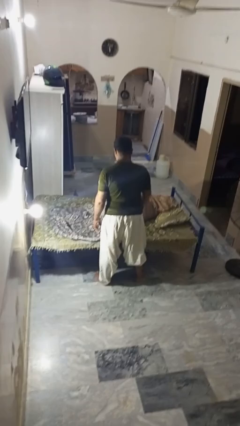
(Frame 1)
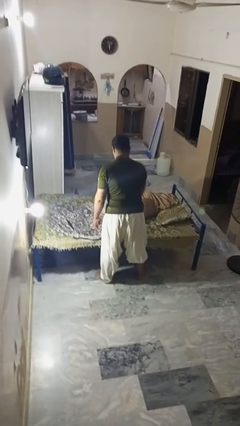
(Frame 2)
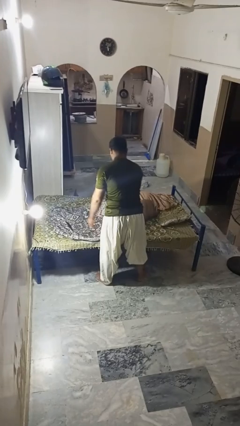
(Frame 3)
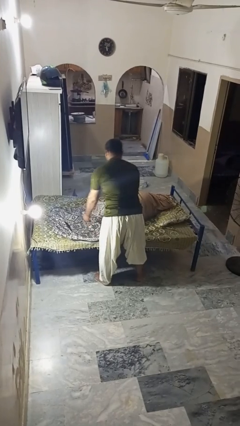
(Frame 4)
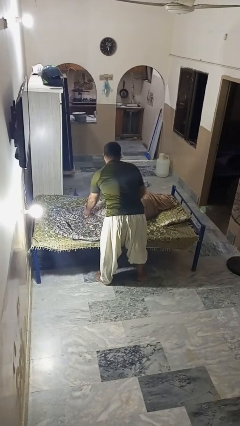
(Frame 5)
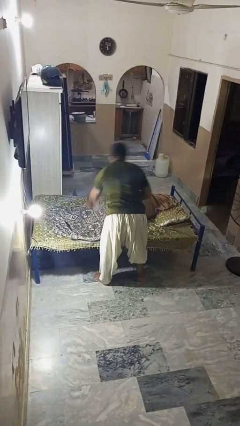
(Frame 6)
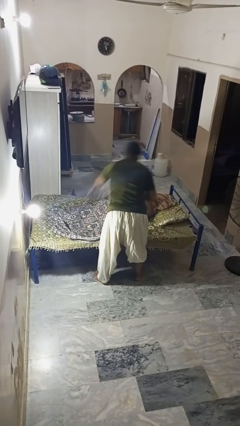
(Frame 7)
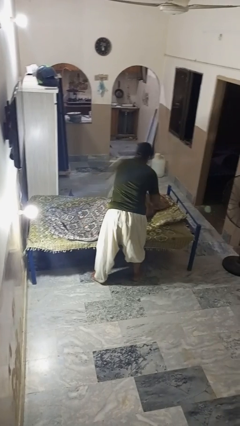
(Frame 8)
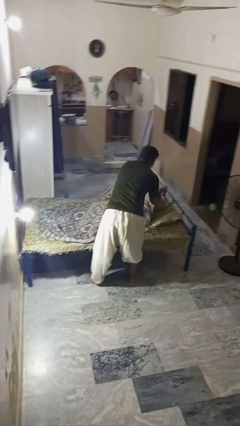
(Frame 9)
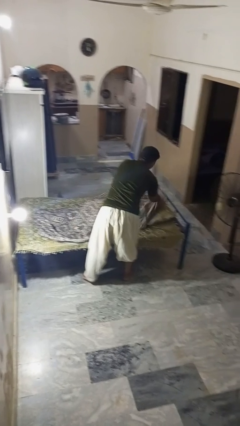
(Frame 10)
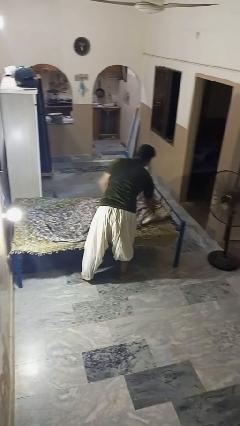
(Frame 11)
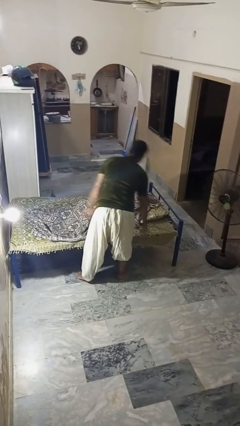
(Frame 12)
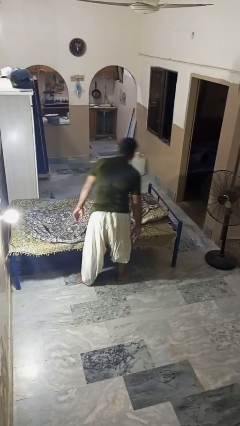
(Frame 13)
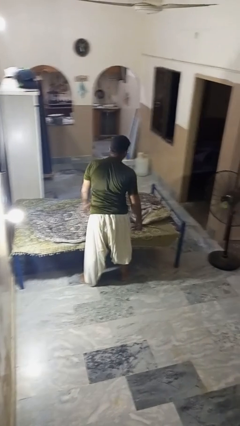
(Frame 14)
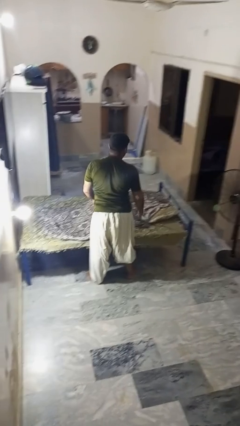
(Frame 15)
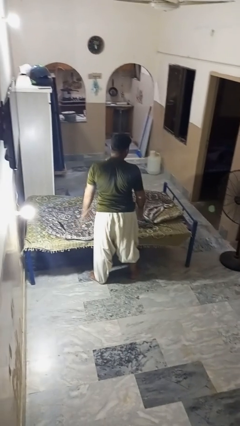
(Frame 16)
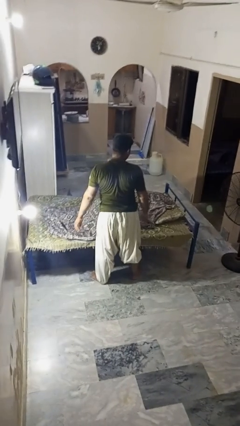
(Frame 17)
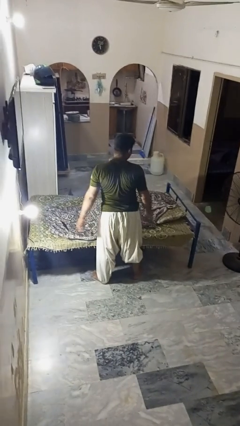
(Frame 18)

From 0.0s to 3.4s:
person covers friend with blanket

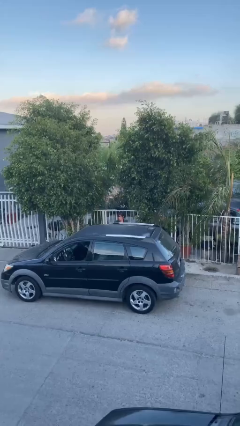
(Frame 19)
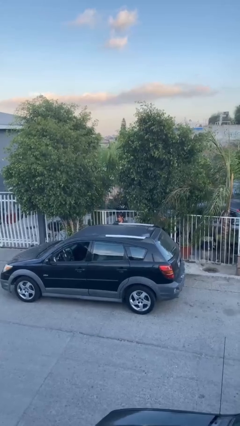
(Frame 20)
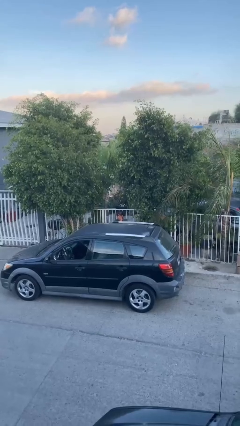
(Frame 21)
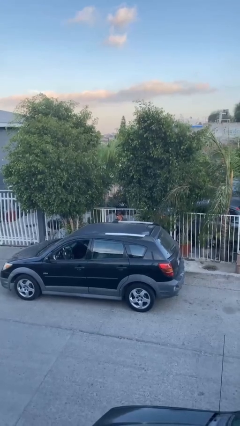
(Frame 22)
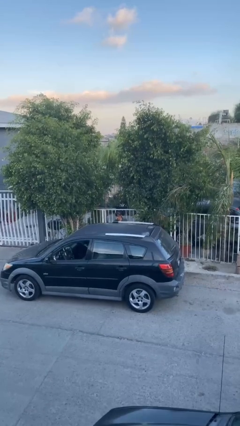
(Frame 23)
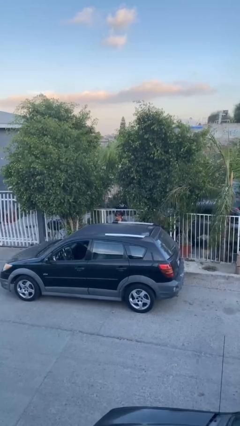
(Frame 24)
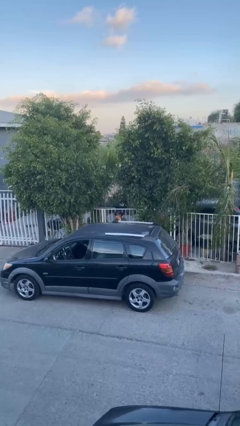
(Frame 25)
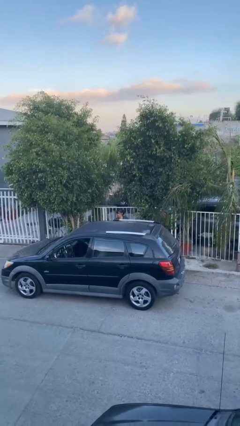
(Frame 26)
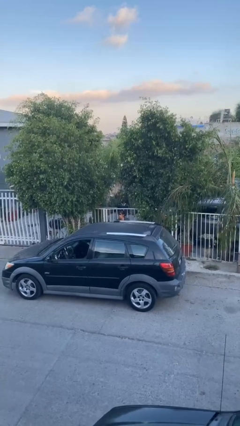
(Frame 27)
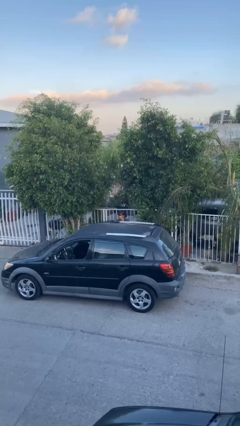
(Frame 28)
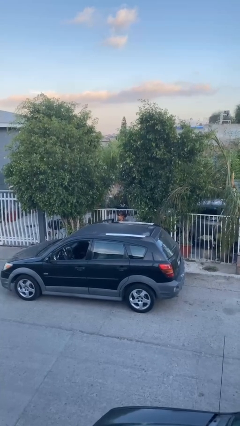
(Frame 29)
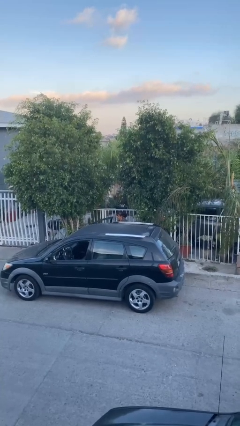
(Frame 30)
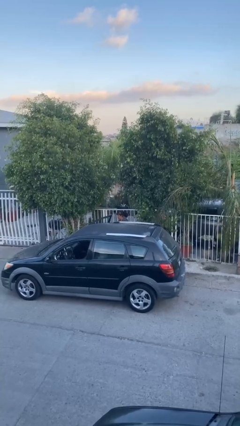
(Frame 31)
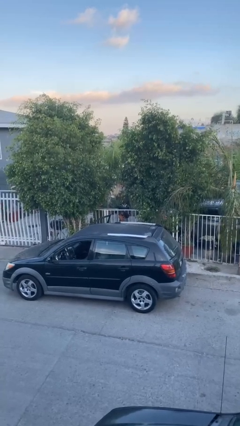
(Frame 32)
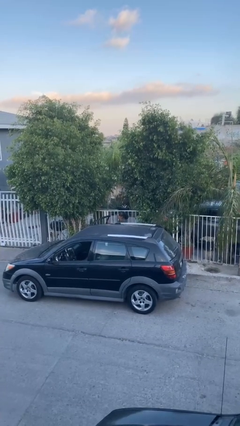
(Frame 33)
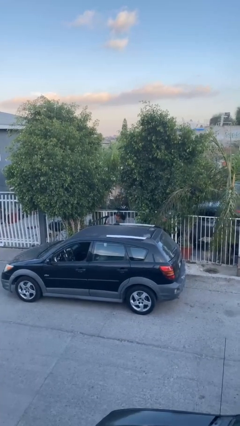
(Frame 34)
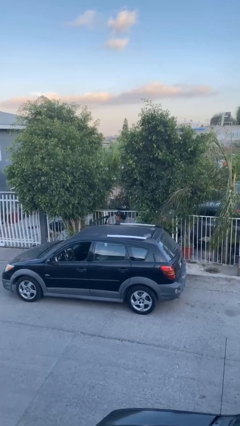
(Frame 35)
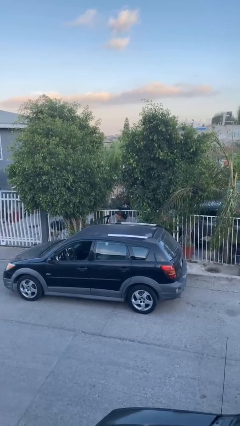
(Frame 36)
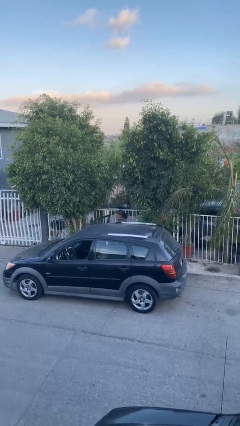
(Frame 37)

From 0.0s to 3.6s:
person opens car door

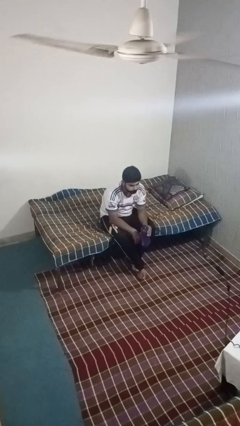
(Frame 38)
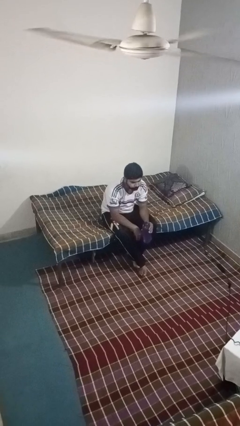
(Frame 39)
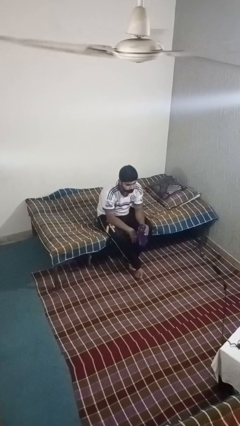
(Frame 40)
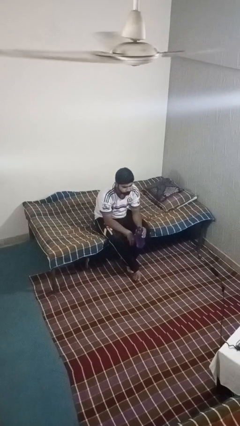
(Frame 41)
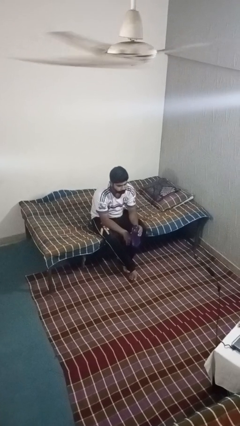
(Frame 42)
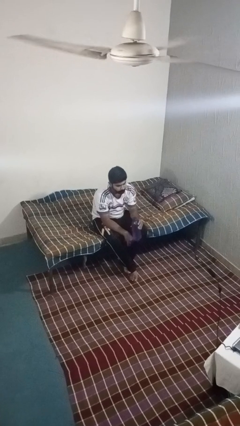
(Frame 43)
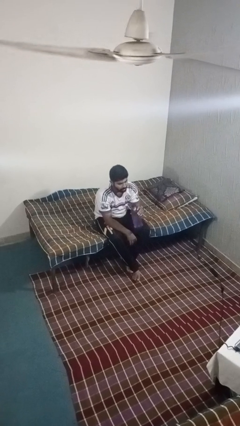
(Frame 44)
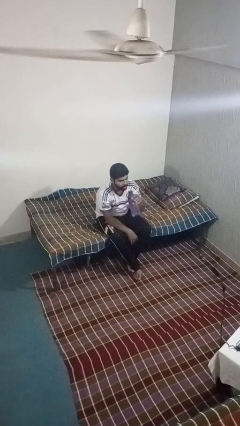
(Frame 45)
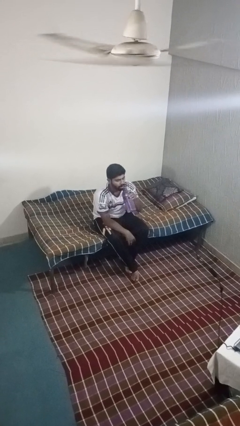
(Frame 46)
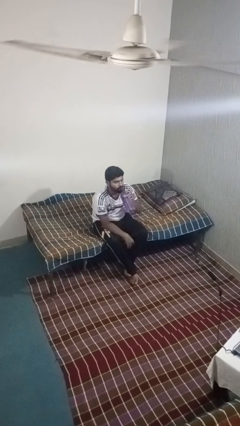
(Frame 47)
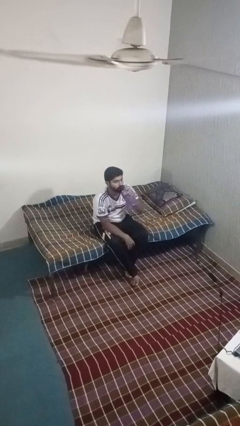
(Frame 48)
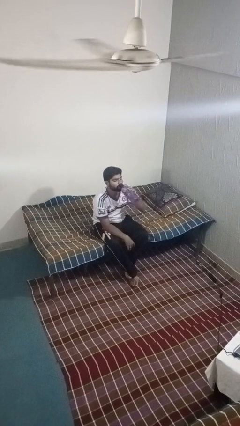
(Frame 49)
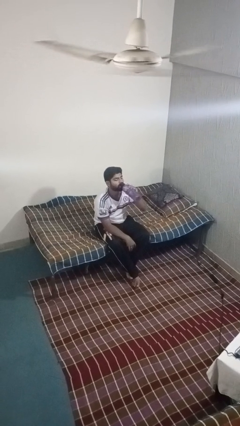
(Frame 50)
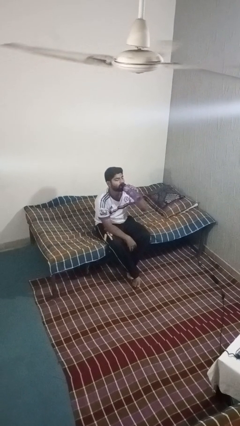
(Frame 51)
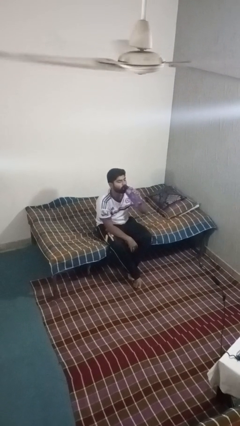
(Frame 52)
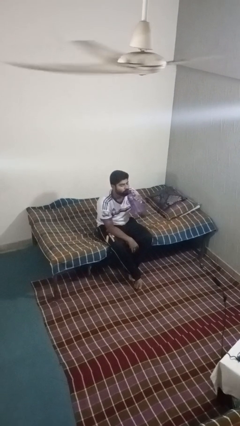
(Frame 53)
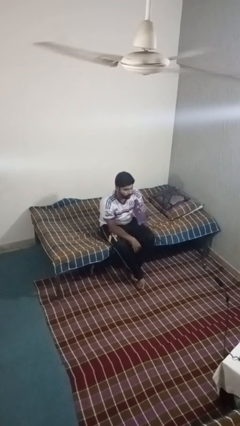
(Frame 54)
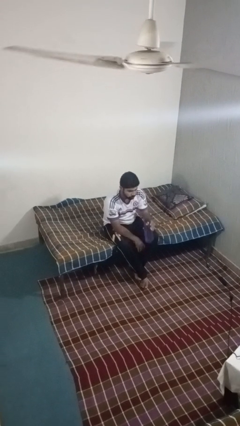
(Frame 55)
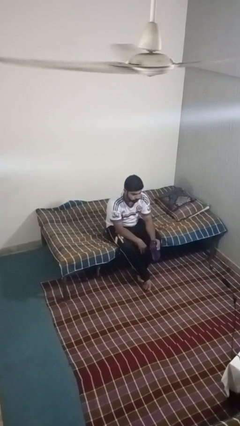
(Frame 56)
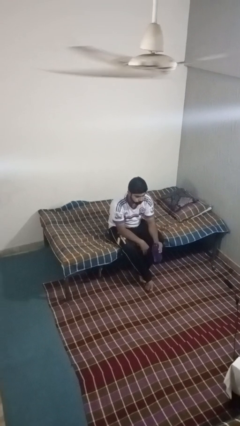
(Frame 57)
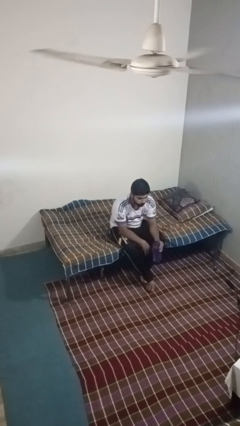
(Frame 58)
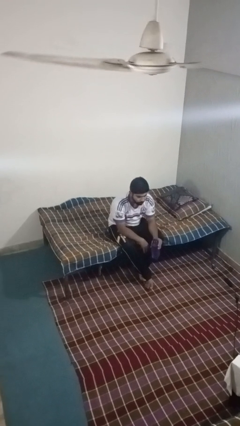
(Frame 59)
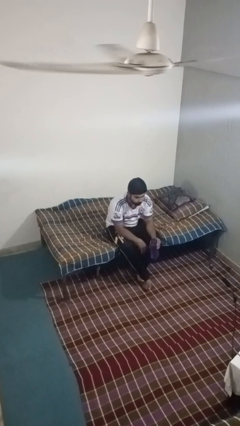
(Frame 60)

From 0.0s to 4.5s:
person drinks from bottle

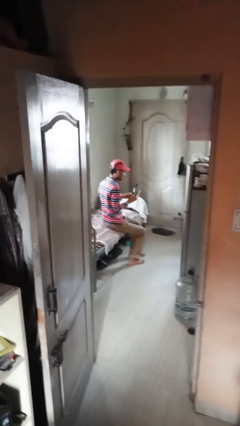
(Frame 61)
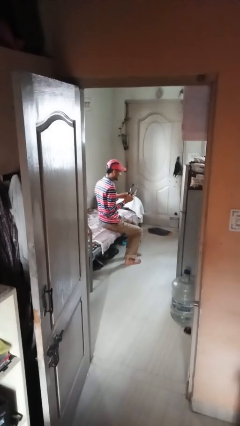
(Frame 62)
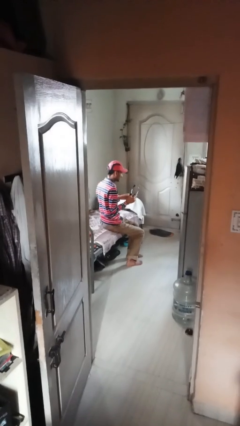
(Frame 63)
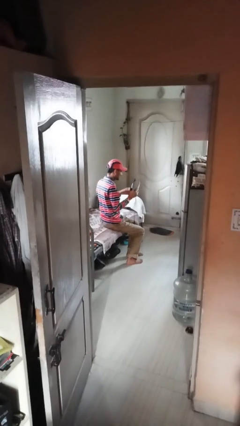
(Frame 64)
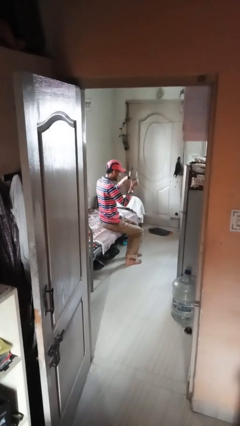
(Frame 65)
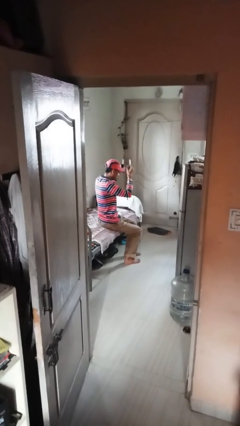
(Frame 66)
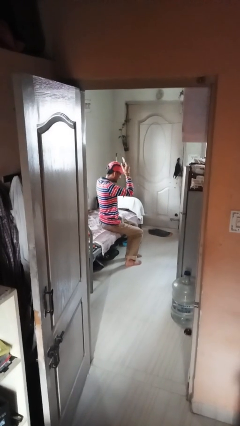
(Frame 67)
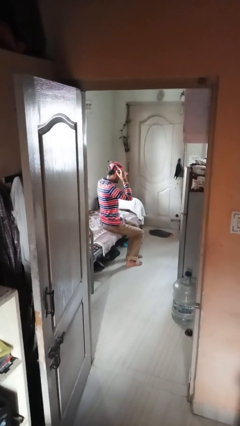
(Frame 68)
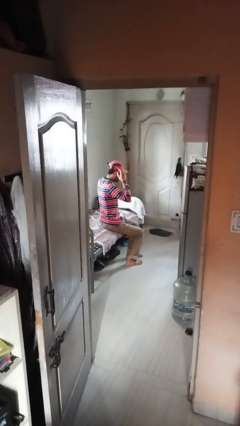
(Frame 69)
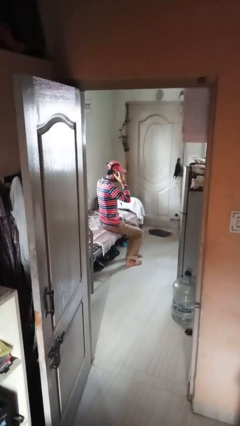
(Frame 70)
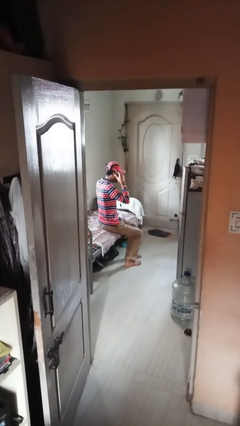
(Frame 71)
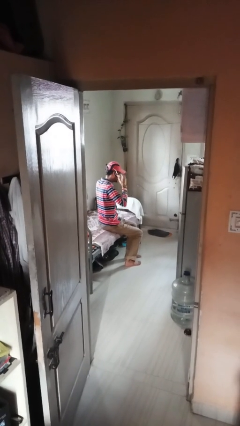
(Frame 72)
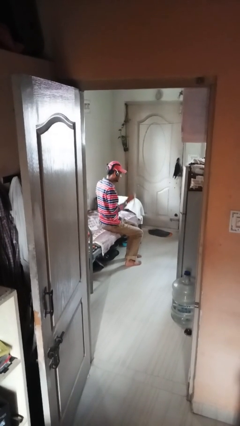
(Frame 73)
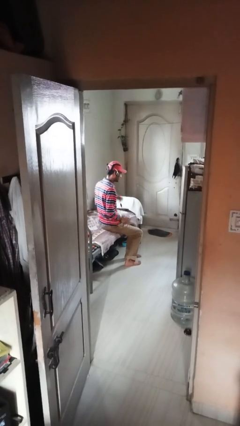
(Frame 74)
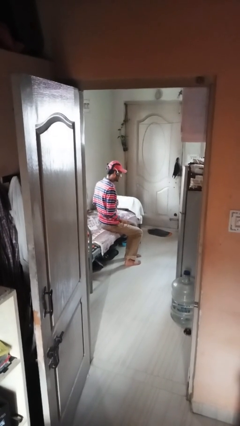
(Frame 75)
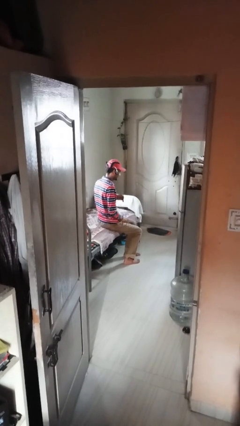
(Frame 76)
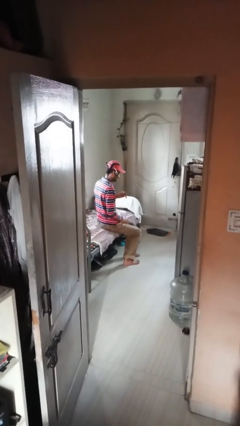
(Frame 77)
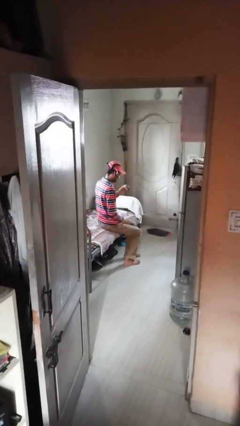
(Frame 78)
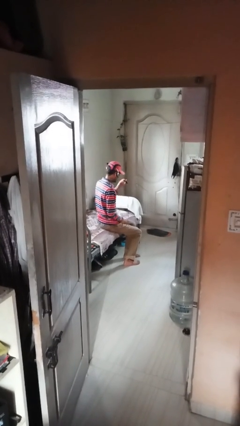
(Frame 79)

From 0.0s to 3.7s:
person puts on headphones

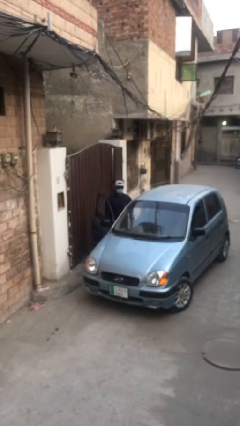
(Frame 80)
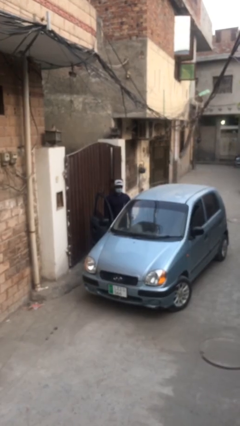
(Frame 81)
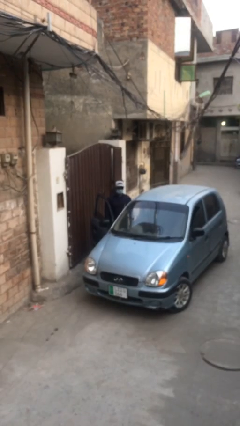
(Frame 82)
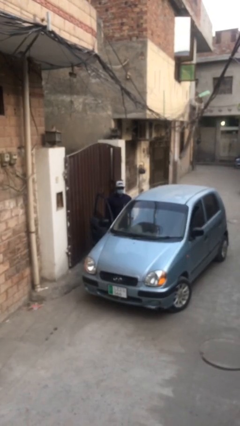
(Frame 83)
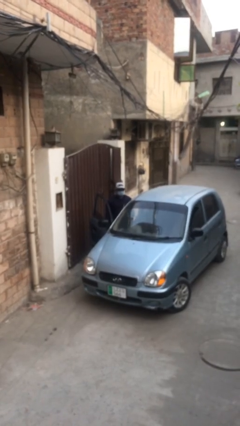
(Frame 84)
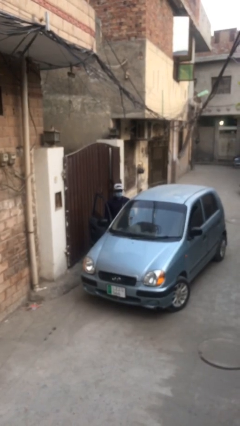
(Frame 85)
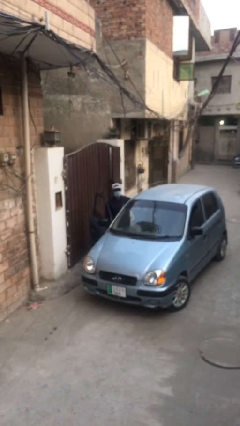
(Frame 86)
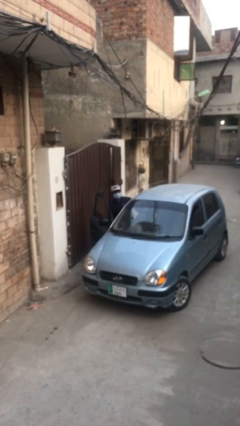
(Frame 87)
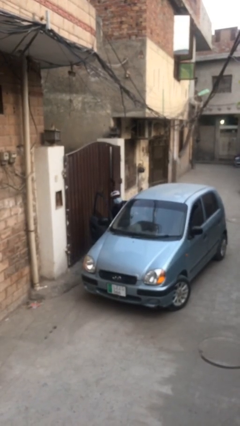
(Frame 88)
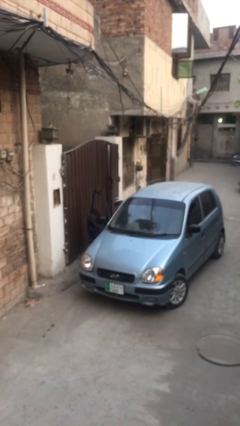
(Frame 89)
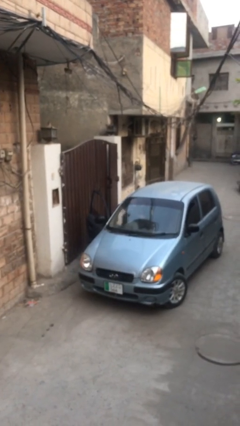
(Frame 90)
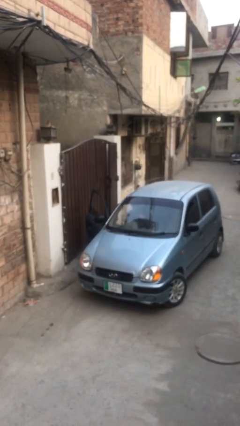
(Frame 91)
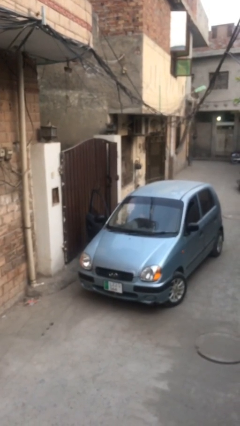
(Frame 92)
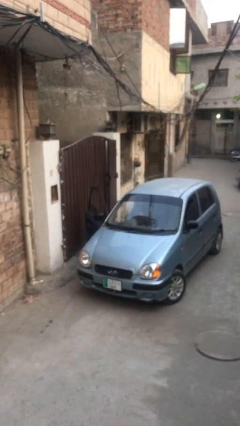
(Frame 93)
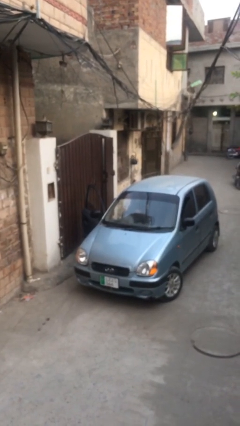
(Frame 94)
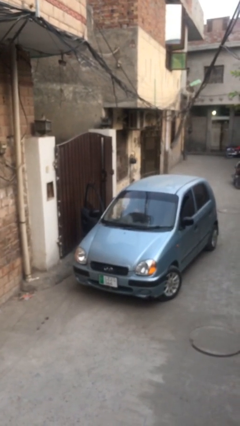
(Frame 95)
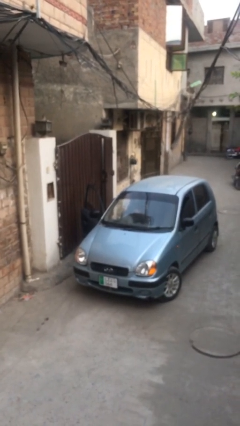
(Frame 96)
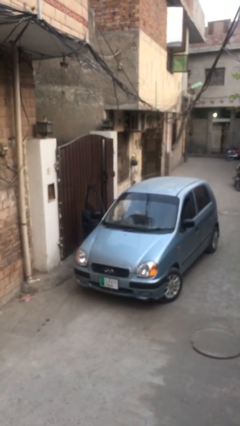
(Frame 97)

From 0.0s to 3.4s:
person enters car
